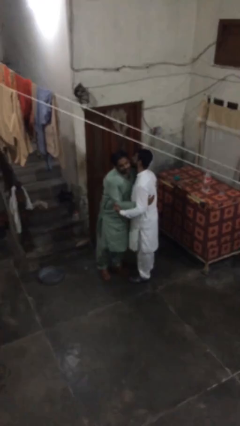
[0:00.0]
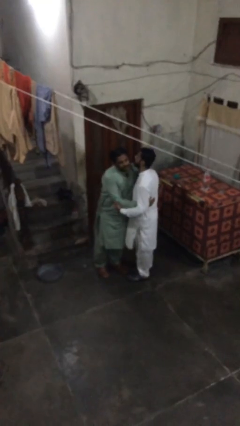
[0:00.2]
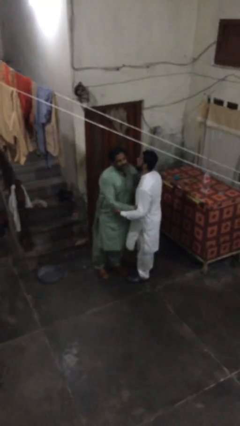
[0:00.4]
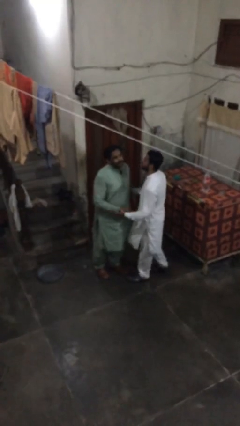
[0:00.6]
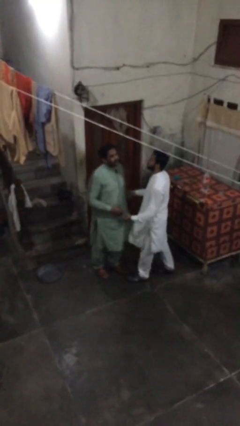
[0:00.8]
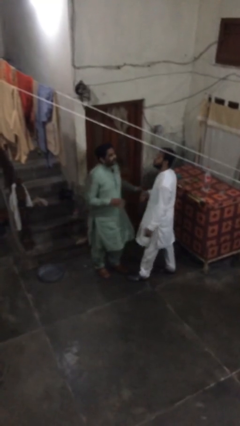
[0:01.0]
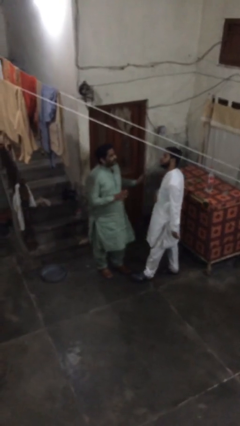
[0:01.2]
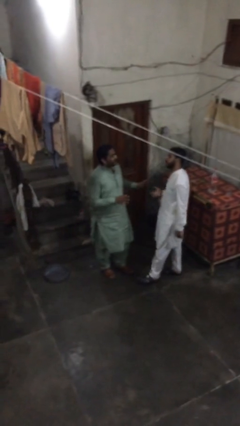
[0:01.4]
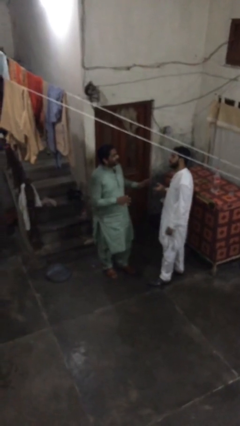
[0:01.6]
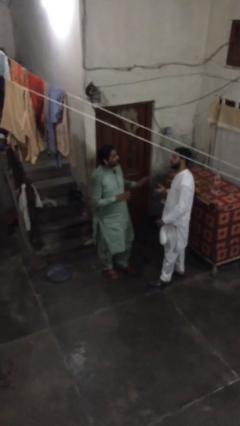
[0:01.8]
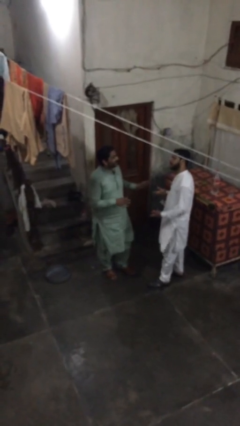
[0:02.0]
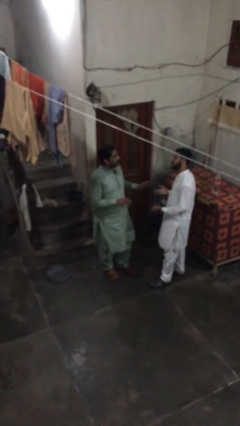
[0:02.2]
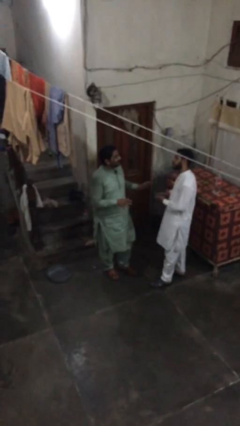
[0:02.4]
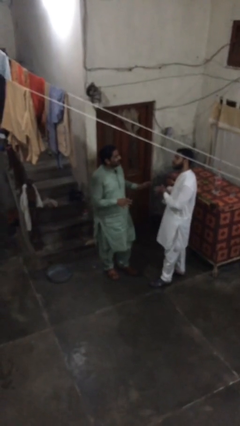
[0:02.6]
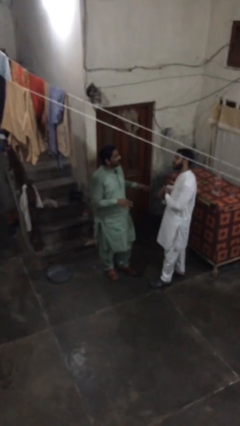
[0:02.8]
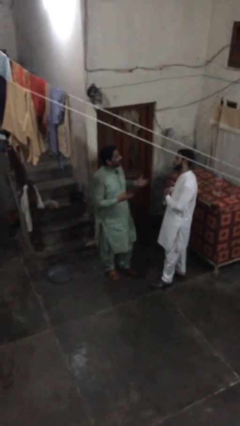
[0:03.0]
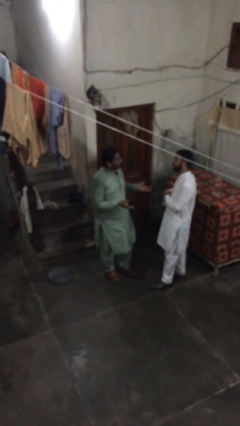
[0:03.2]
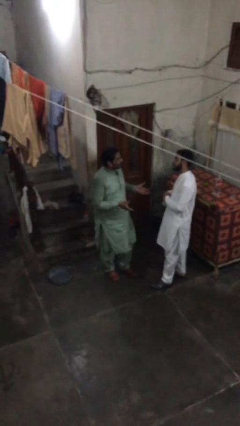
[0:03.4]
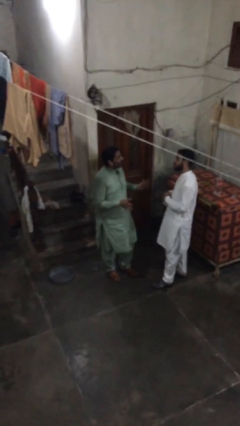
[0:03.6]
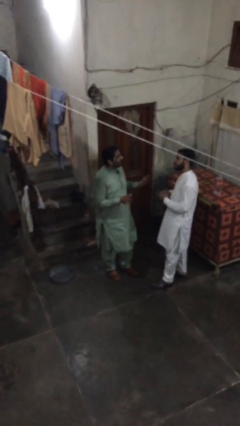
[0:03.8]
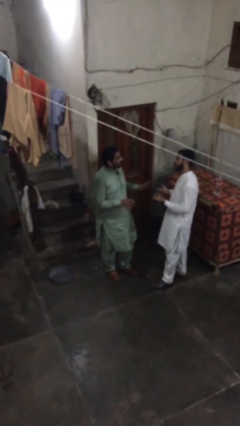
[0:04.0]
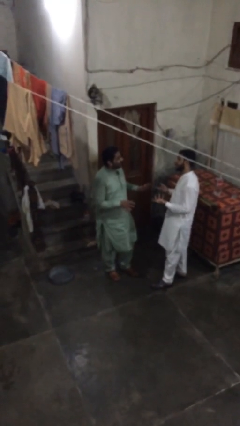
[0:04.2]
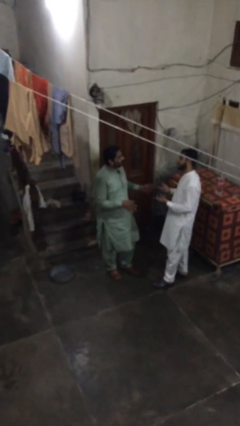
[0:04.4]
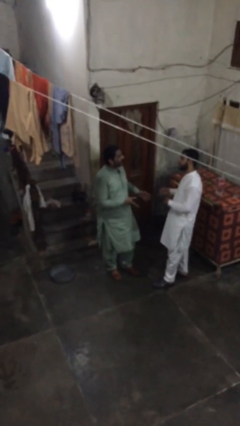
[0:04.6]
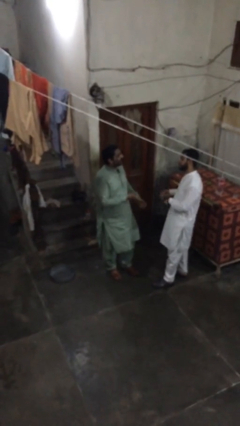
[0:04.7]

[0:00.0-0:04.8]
person talks to person

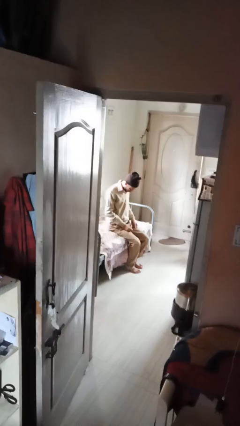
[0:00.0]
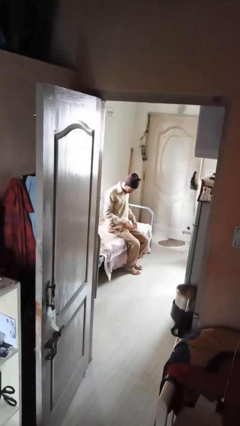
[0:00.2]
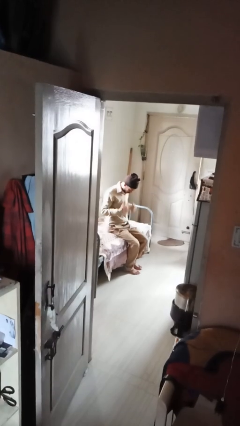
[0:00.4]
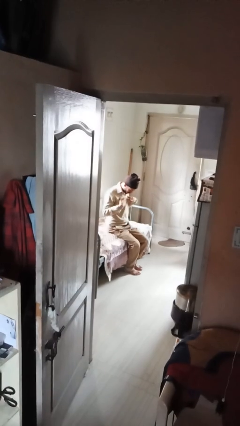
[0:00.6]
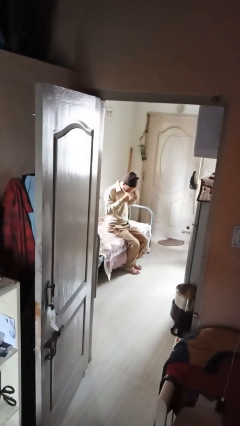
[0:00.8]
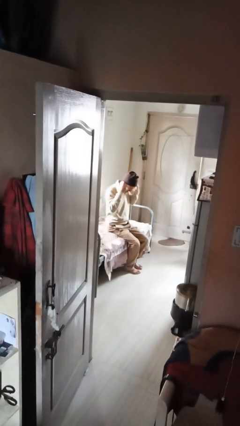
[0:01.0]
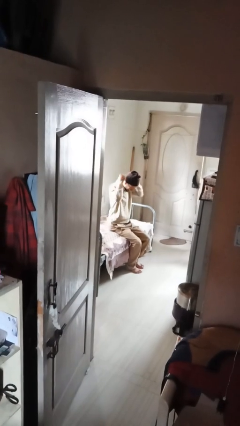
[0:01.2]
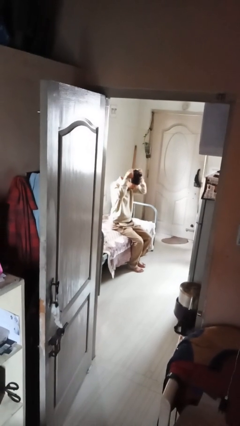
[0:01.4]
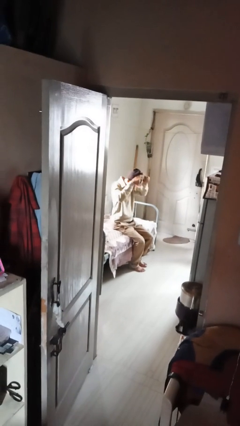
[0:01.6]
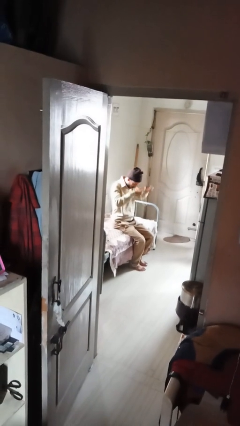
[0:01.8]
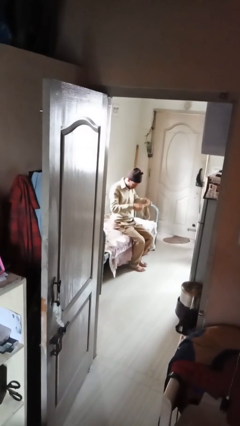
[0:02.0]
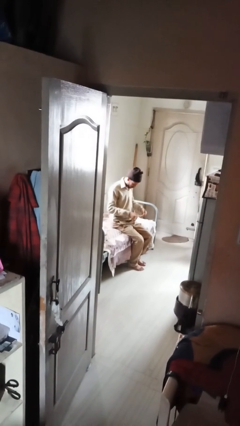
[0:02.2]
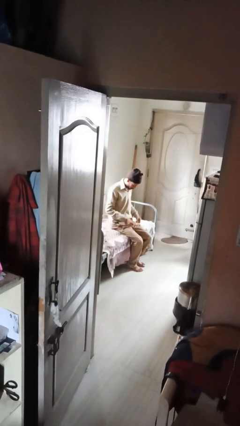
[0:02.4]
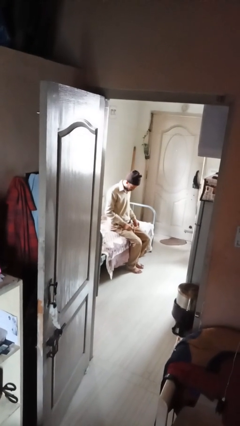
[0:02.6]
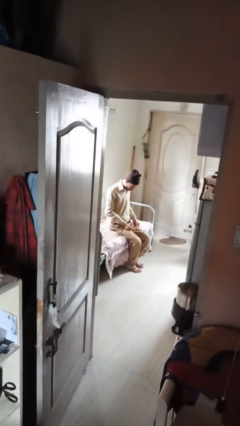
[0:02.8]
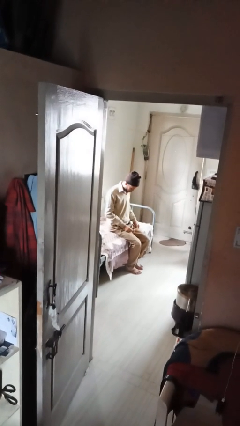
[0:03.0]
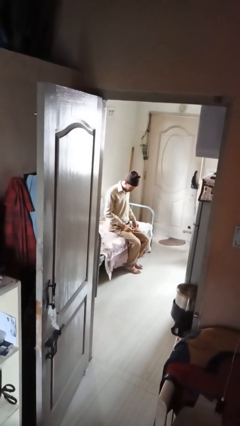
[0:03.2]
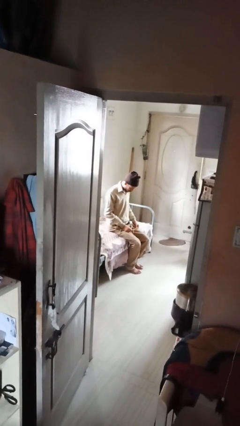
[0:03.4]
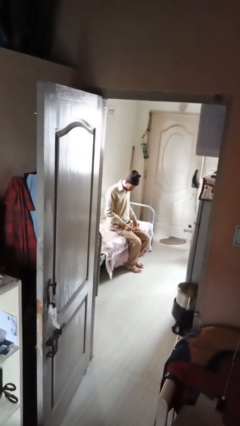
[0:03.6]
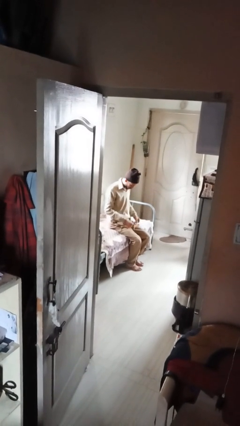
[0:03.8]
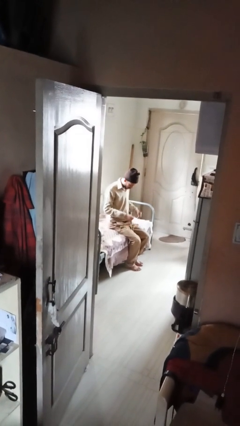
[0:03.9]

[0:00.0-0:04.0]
person takes off necklace

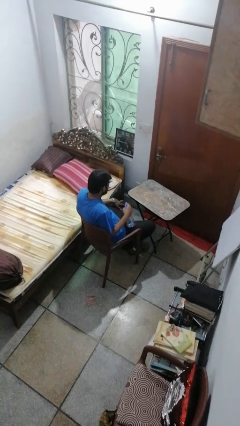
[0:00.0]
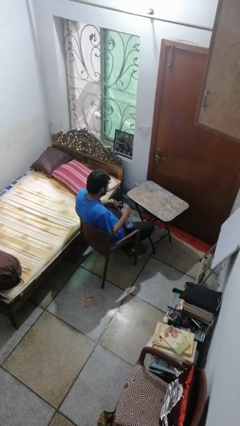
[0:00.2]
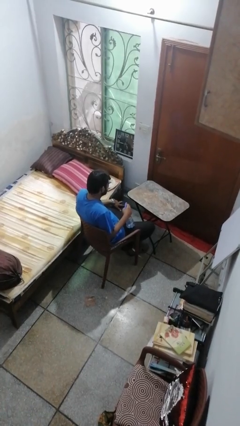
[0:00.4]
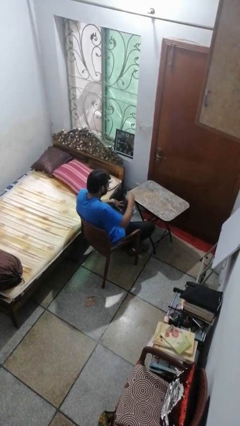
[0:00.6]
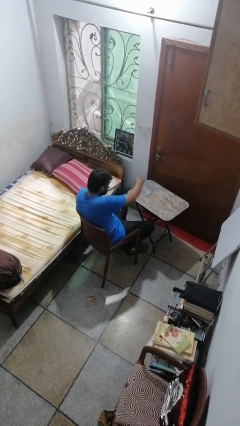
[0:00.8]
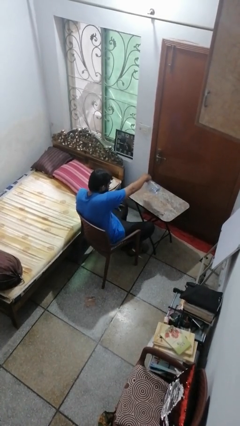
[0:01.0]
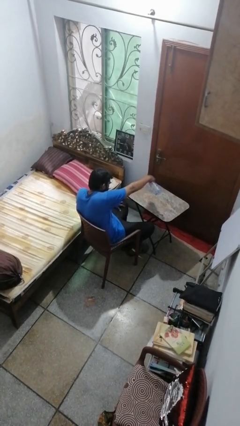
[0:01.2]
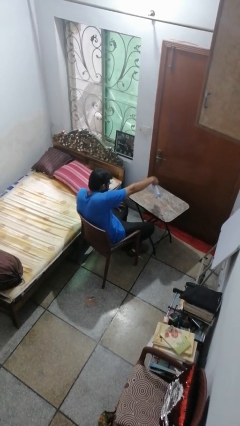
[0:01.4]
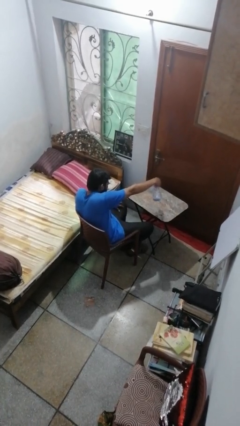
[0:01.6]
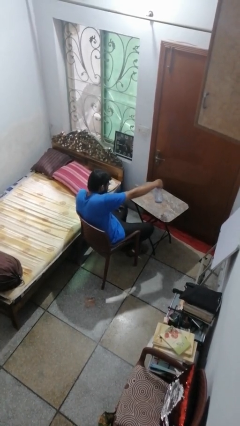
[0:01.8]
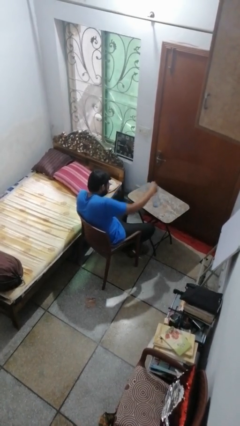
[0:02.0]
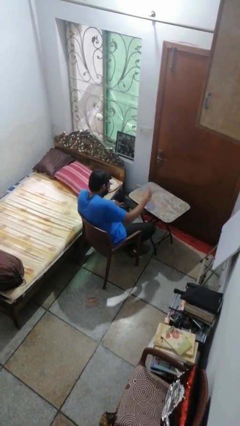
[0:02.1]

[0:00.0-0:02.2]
person sprays from bottle

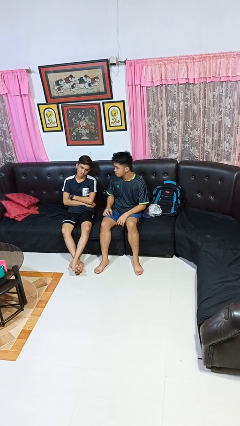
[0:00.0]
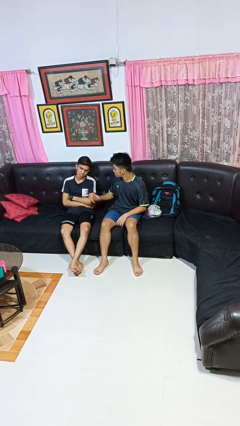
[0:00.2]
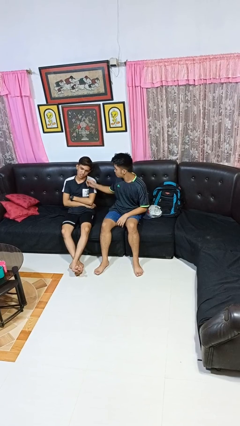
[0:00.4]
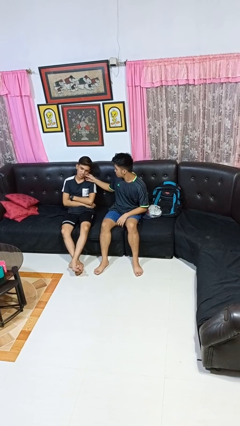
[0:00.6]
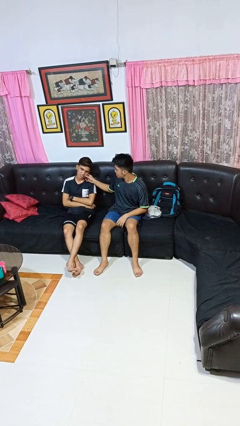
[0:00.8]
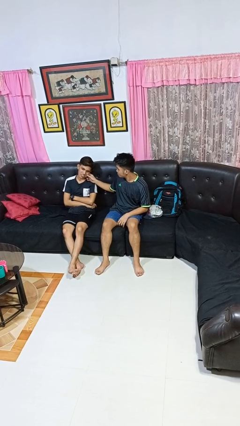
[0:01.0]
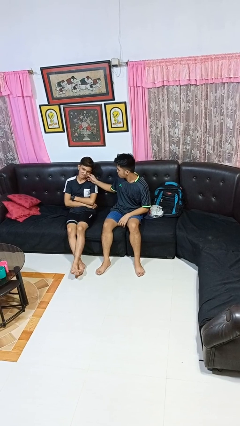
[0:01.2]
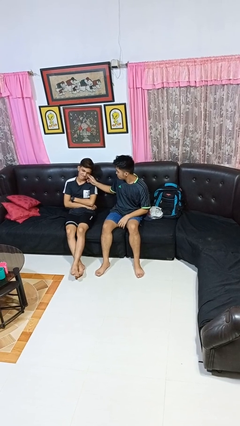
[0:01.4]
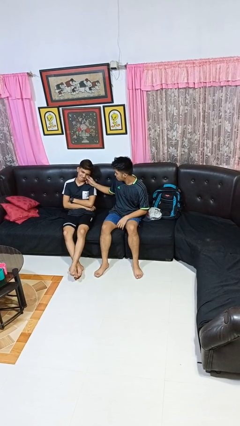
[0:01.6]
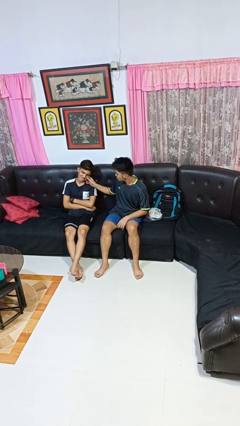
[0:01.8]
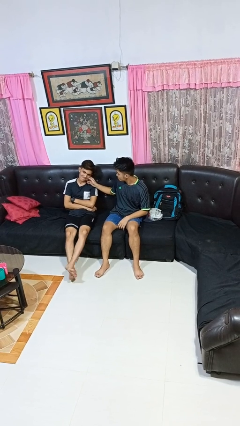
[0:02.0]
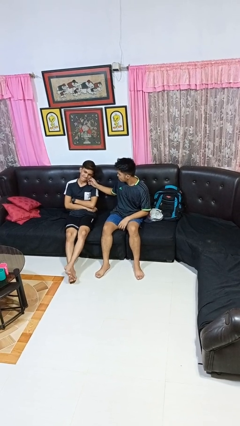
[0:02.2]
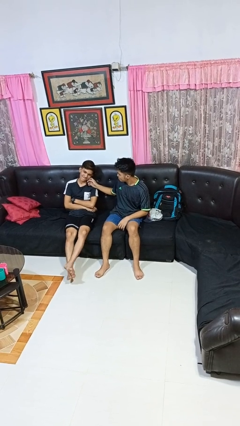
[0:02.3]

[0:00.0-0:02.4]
person touches face of person

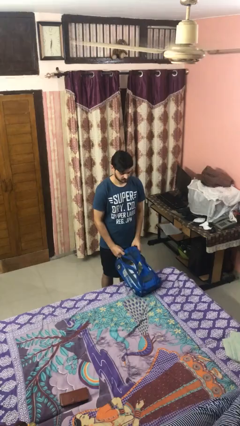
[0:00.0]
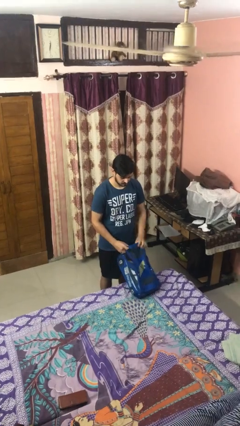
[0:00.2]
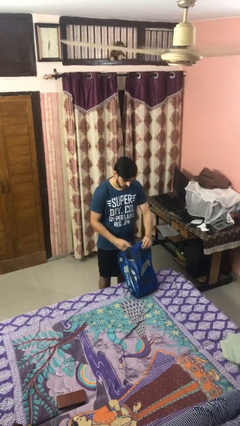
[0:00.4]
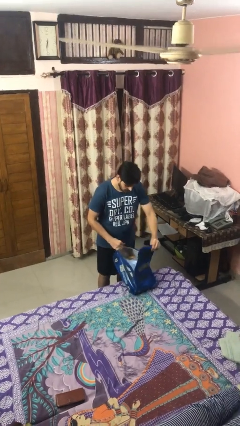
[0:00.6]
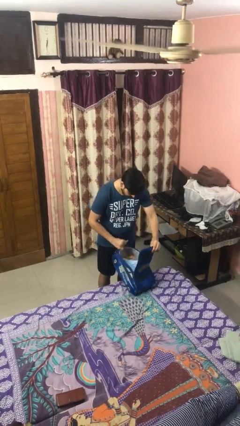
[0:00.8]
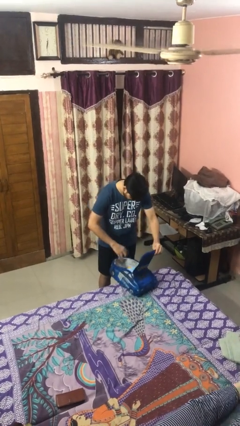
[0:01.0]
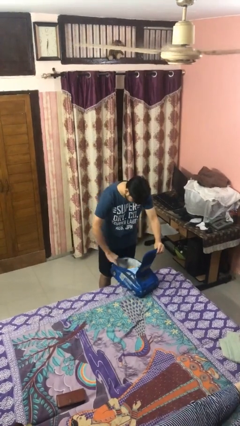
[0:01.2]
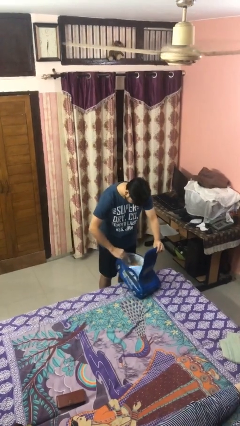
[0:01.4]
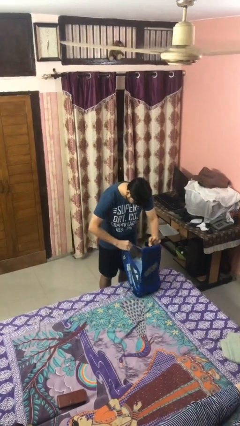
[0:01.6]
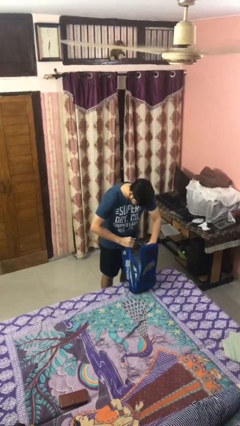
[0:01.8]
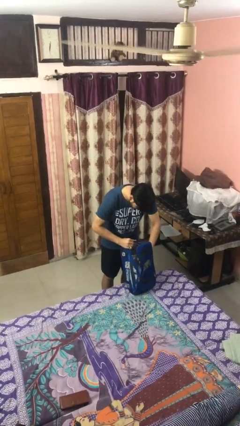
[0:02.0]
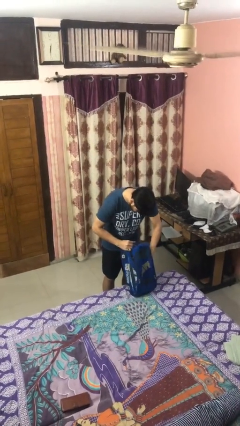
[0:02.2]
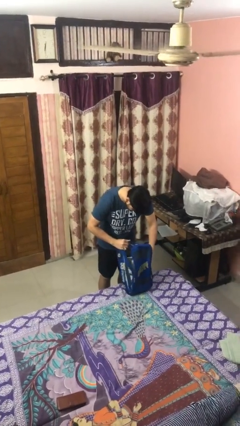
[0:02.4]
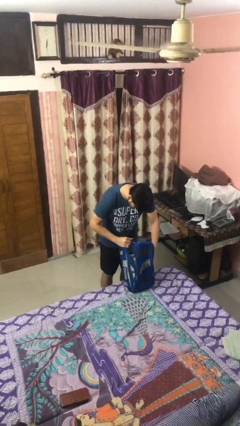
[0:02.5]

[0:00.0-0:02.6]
person searches in purse

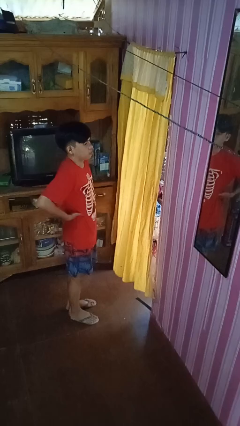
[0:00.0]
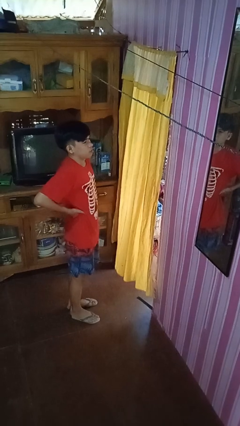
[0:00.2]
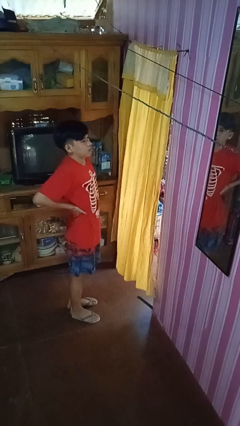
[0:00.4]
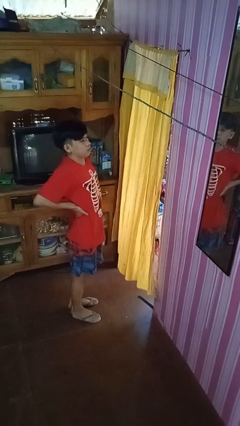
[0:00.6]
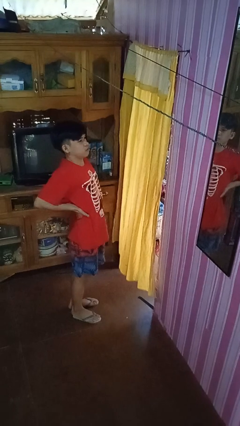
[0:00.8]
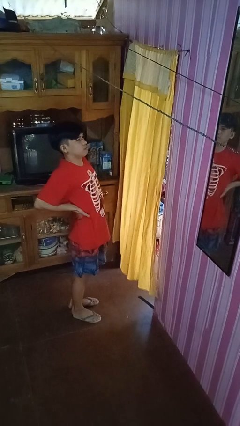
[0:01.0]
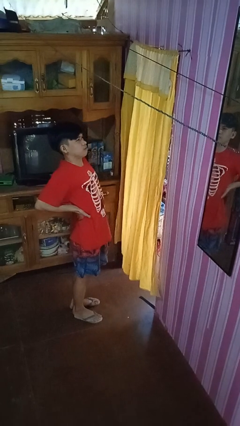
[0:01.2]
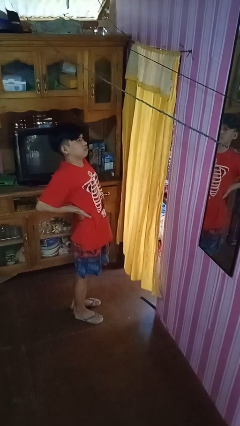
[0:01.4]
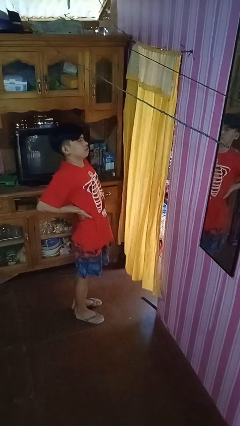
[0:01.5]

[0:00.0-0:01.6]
person stretches back
